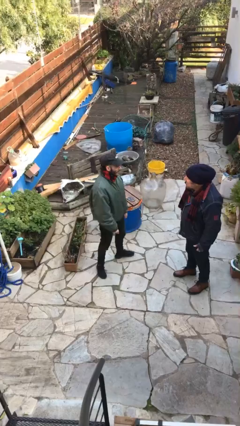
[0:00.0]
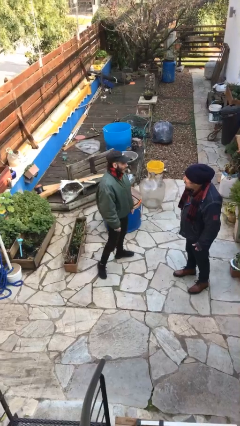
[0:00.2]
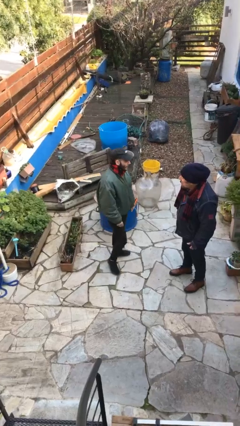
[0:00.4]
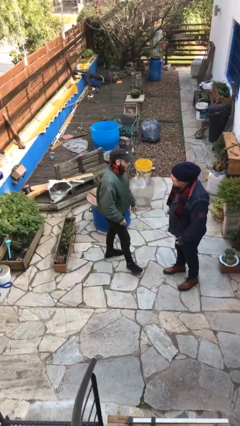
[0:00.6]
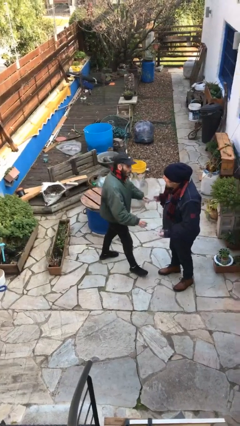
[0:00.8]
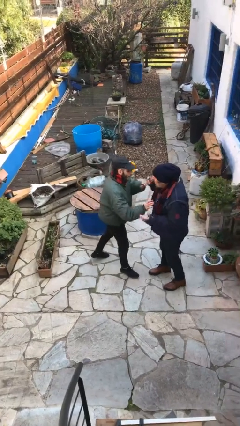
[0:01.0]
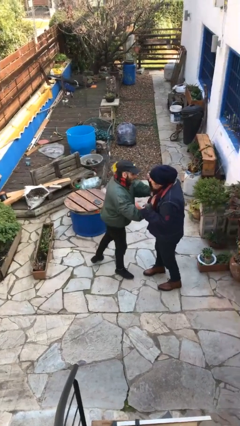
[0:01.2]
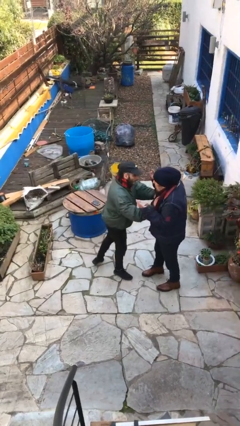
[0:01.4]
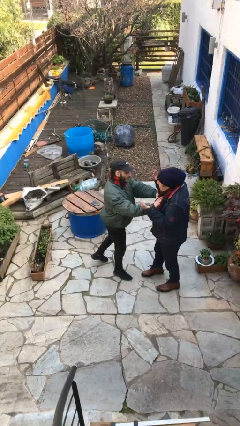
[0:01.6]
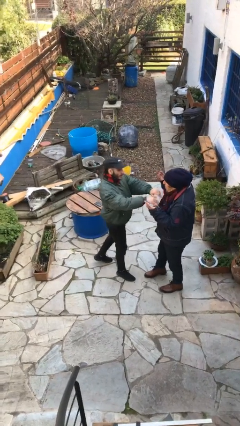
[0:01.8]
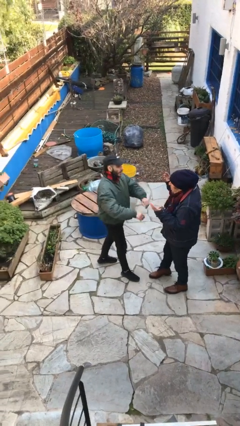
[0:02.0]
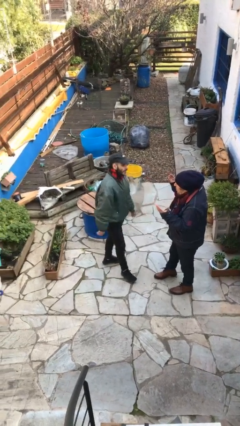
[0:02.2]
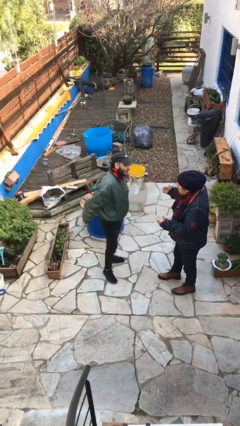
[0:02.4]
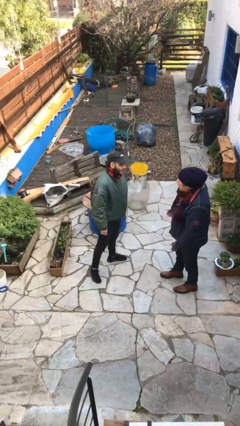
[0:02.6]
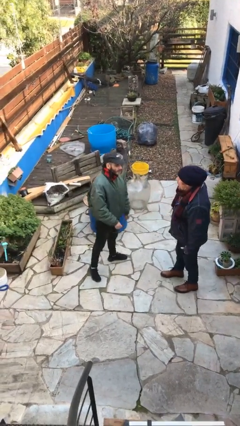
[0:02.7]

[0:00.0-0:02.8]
person shoves person

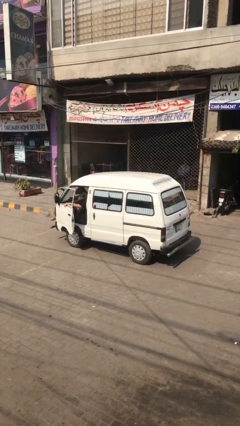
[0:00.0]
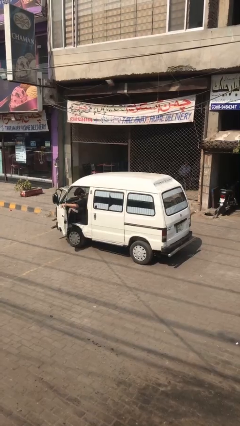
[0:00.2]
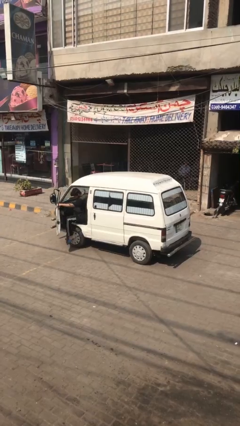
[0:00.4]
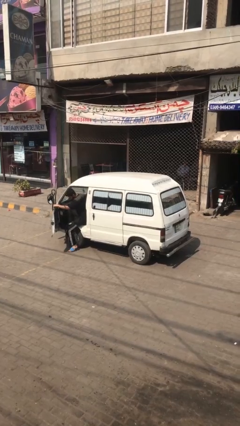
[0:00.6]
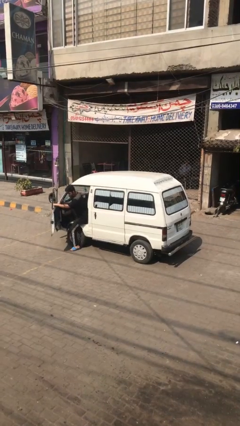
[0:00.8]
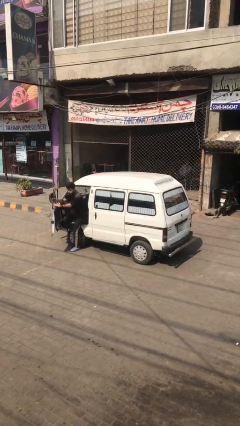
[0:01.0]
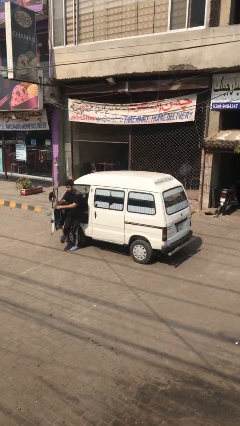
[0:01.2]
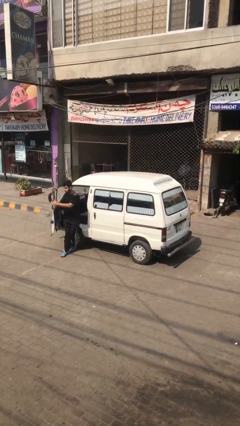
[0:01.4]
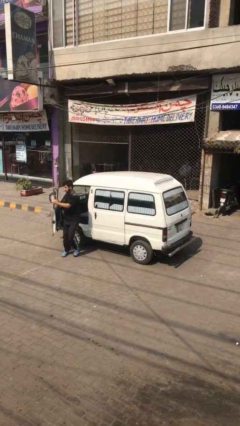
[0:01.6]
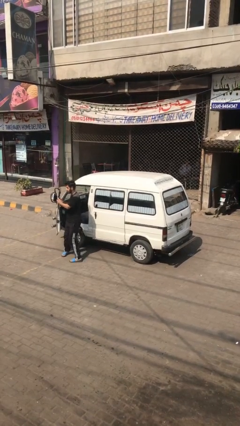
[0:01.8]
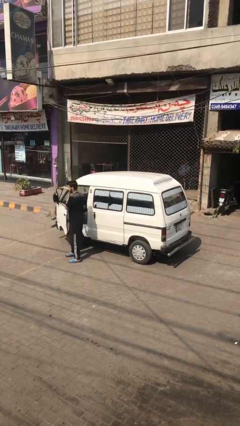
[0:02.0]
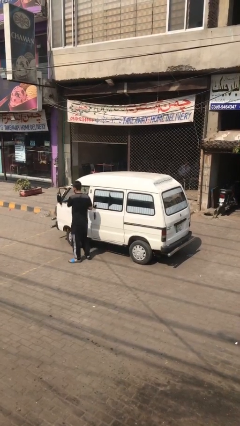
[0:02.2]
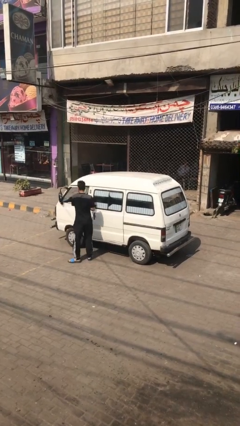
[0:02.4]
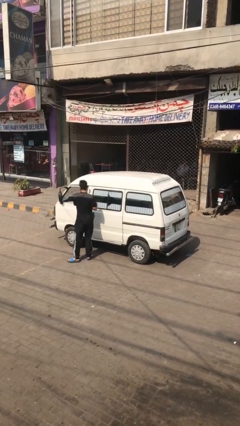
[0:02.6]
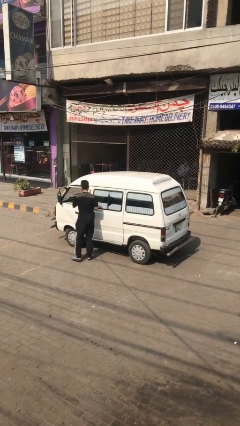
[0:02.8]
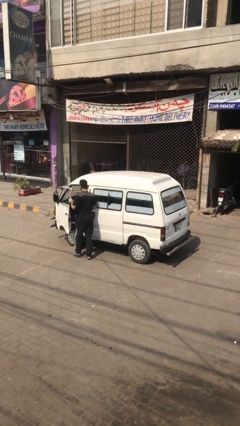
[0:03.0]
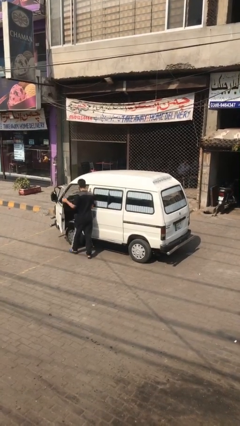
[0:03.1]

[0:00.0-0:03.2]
car drops off person

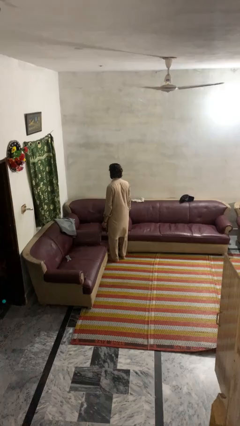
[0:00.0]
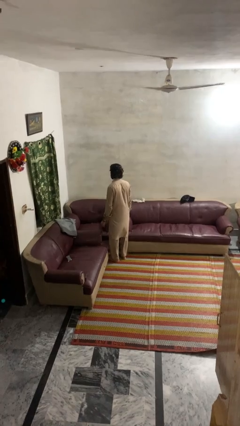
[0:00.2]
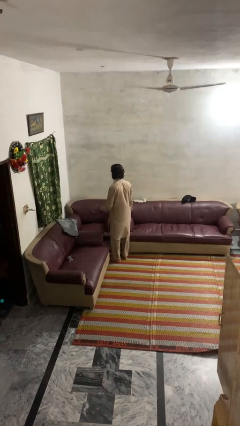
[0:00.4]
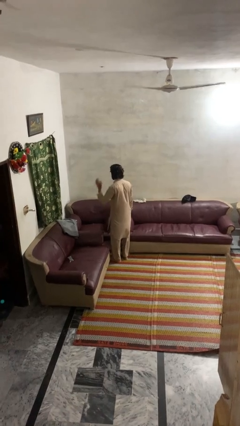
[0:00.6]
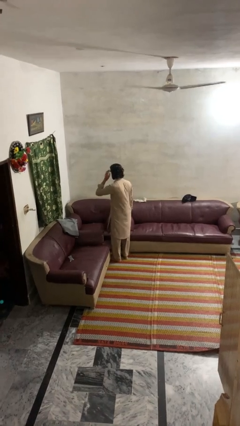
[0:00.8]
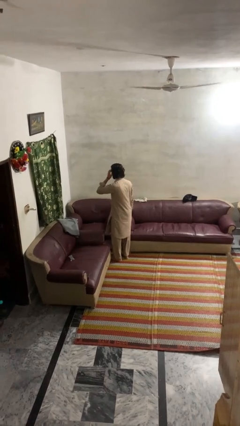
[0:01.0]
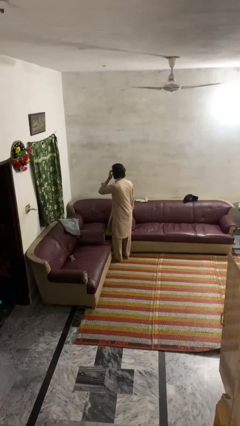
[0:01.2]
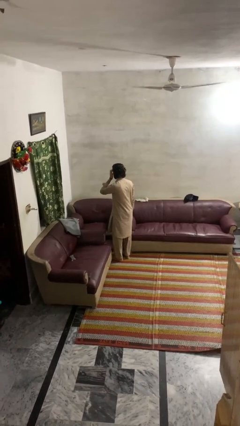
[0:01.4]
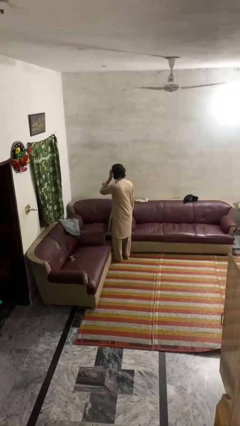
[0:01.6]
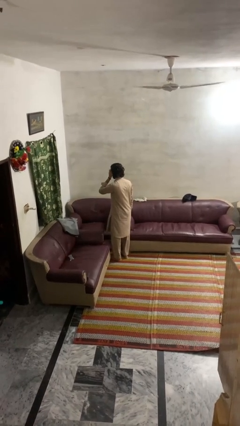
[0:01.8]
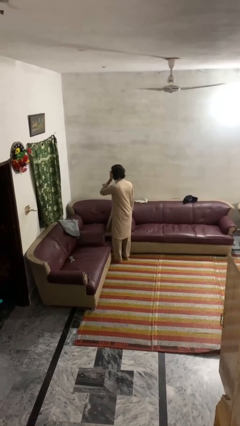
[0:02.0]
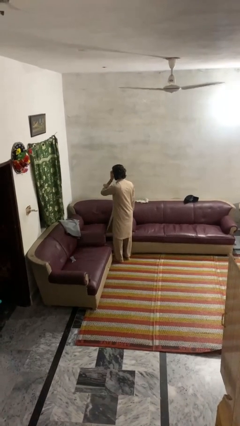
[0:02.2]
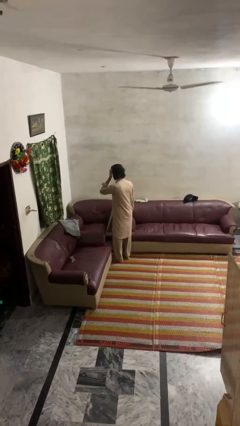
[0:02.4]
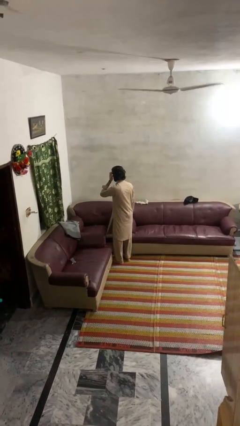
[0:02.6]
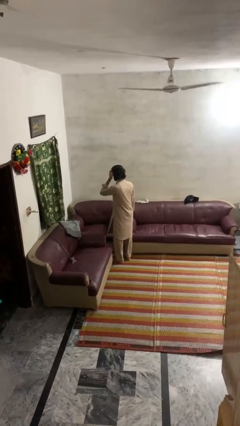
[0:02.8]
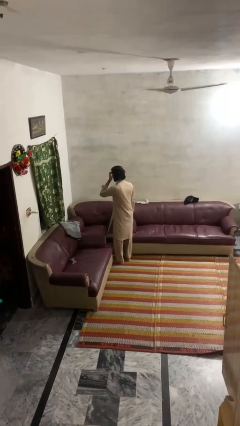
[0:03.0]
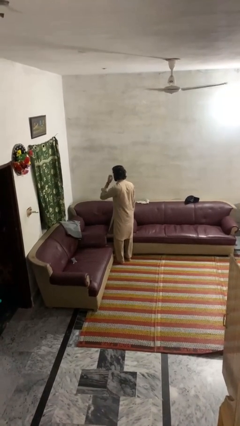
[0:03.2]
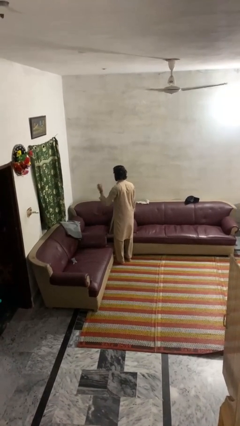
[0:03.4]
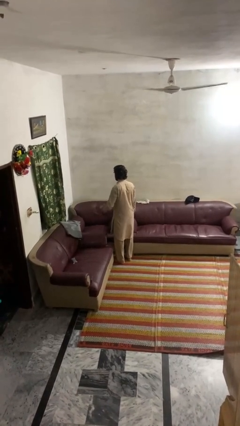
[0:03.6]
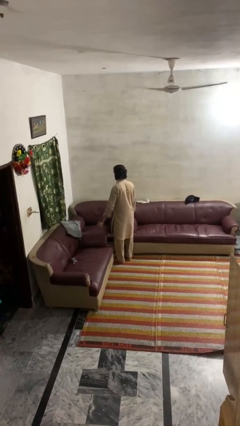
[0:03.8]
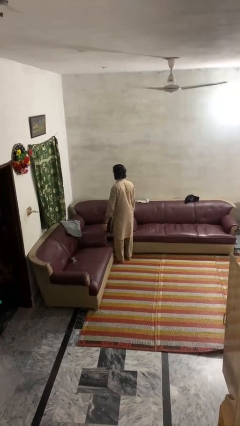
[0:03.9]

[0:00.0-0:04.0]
person scratches face

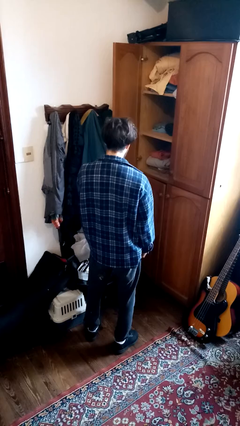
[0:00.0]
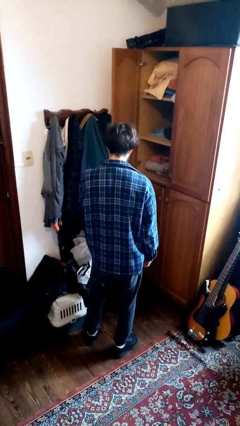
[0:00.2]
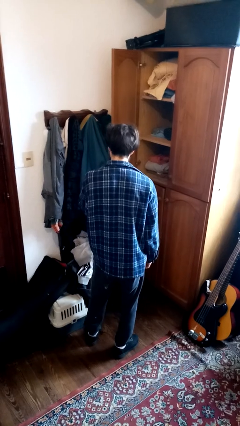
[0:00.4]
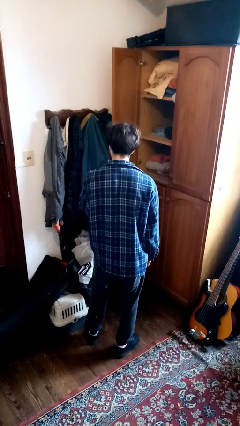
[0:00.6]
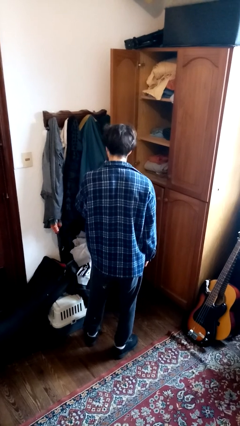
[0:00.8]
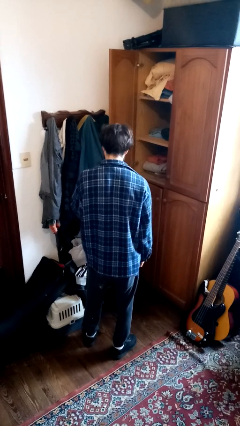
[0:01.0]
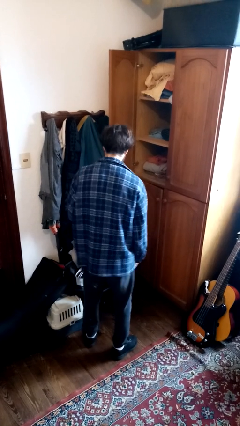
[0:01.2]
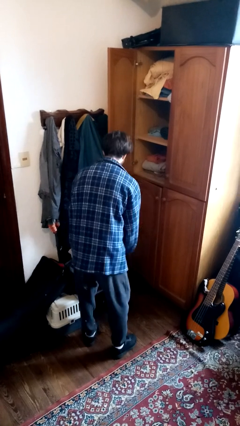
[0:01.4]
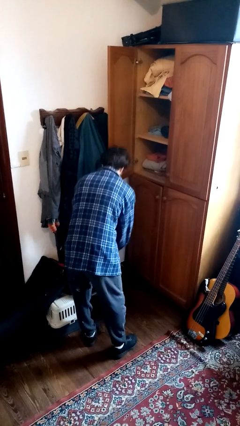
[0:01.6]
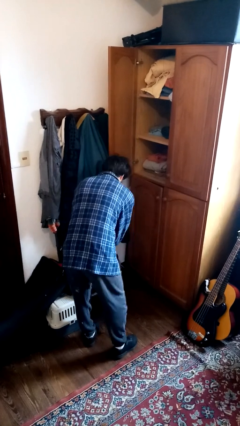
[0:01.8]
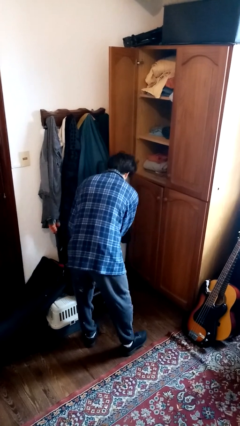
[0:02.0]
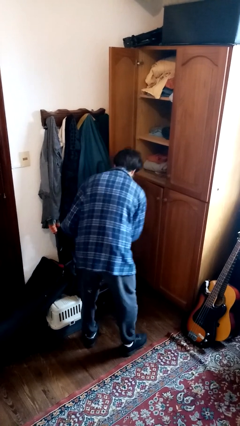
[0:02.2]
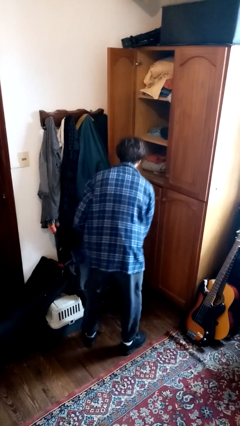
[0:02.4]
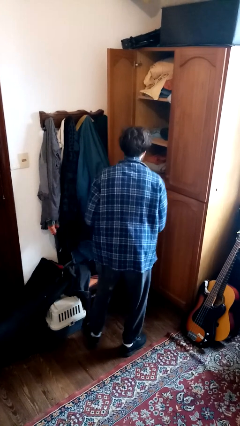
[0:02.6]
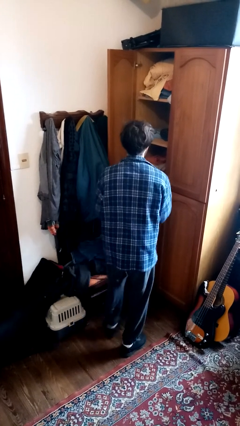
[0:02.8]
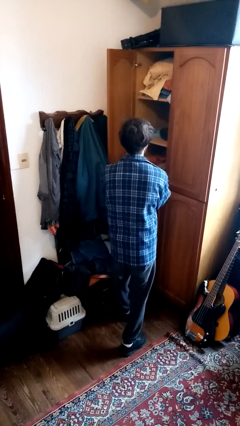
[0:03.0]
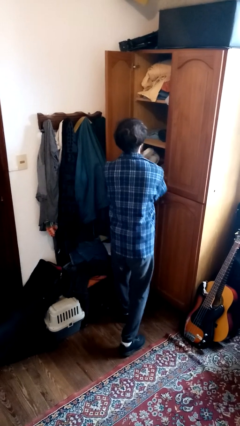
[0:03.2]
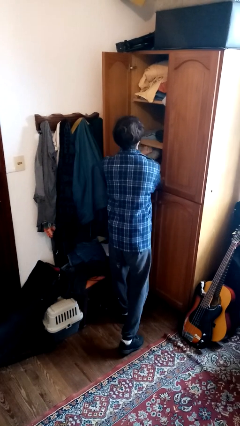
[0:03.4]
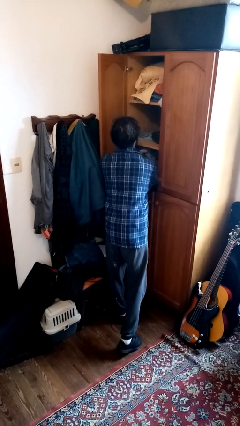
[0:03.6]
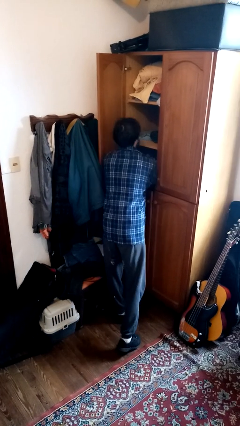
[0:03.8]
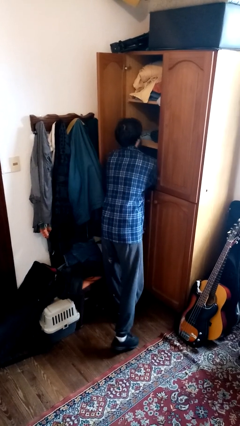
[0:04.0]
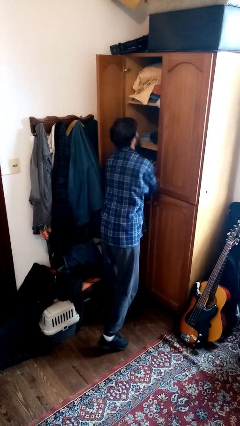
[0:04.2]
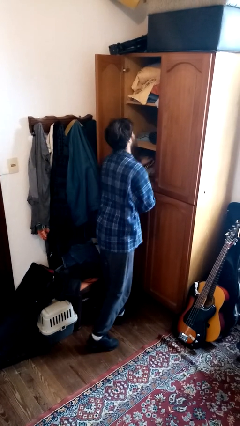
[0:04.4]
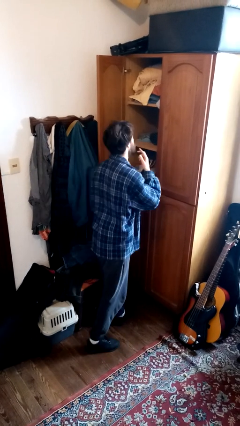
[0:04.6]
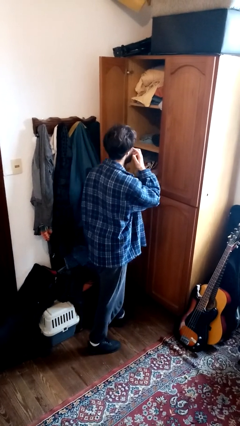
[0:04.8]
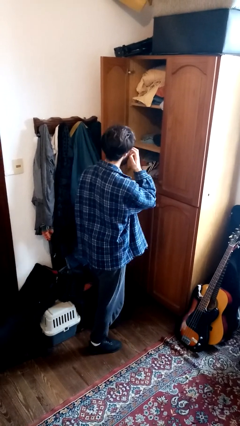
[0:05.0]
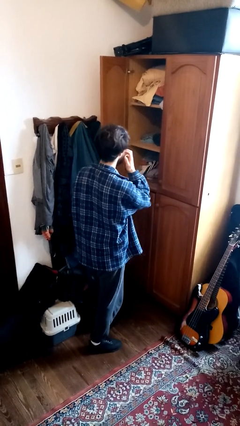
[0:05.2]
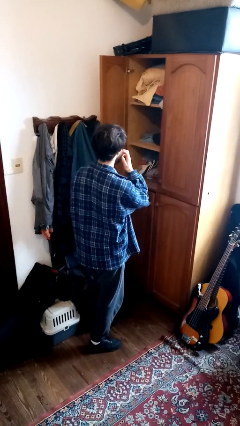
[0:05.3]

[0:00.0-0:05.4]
person puts clothes into dresser

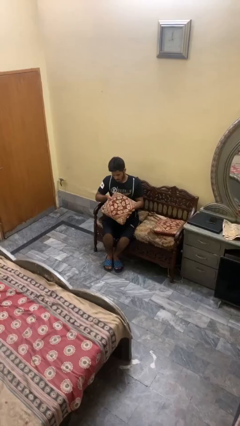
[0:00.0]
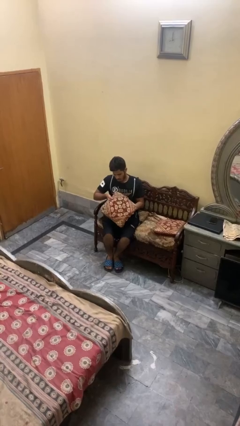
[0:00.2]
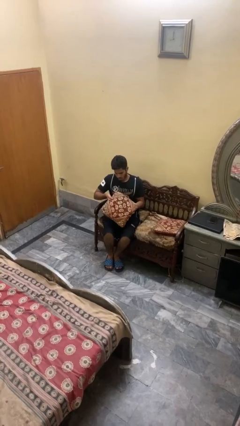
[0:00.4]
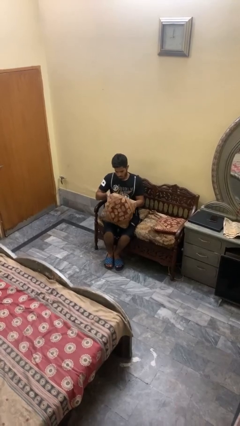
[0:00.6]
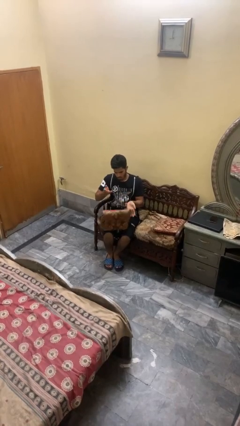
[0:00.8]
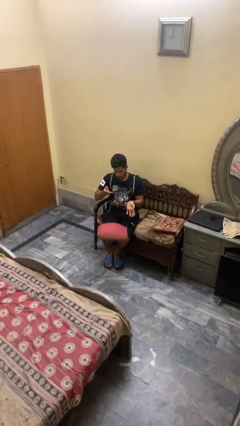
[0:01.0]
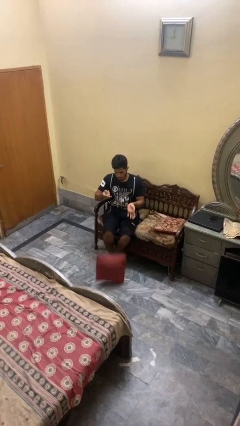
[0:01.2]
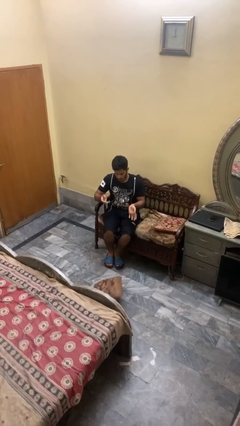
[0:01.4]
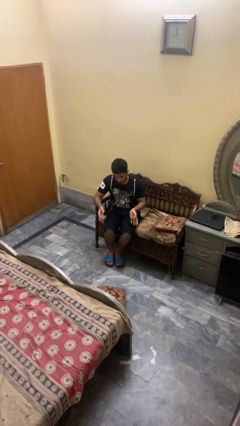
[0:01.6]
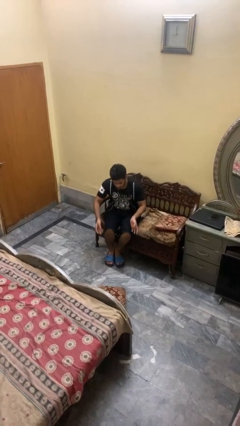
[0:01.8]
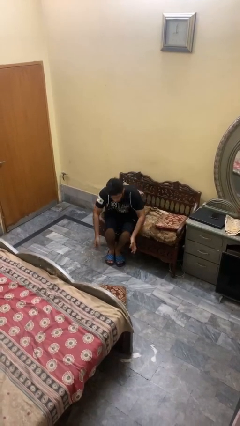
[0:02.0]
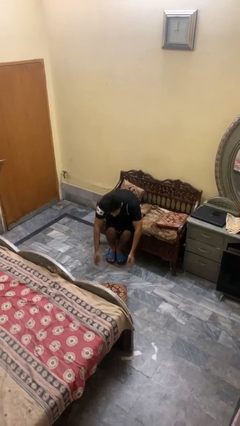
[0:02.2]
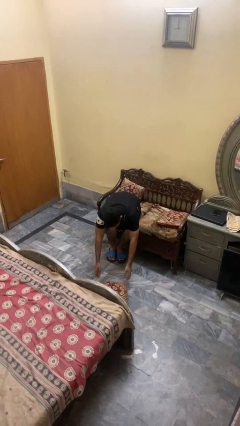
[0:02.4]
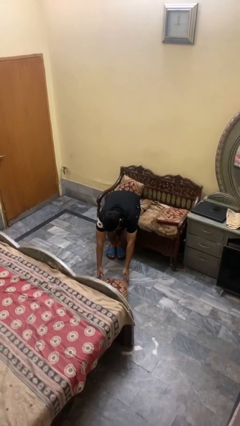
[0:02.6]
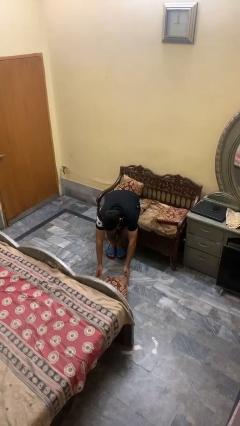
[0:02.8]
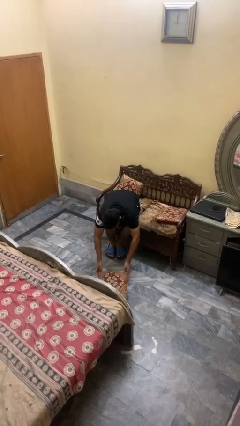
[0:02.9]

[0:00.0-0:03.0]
person drops object
